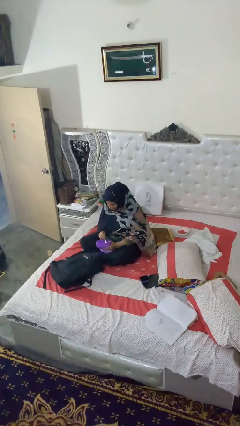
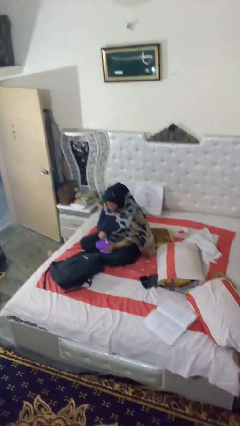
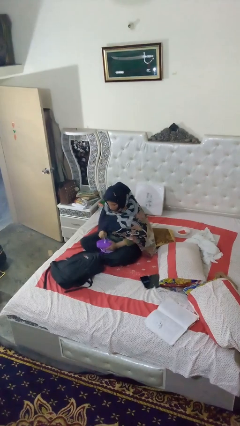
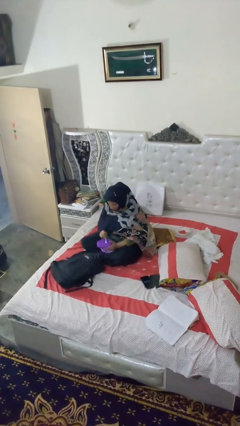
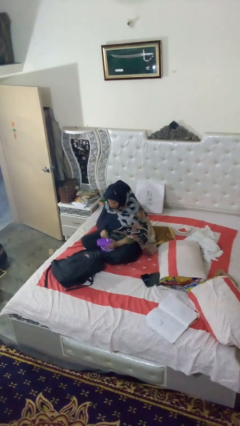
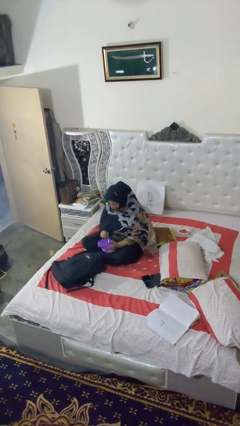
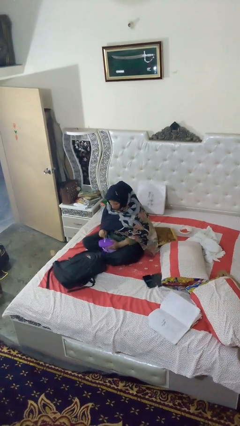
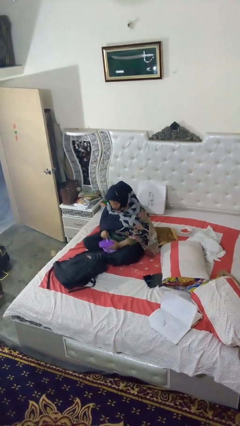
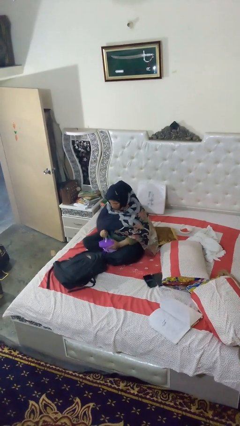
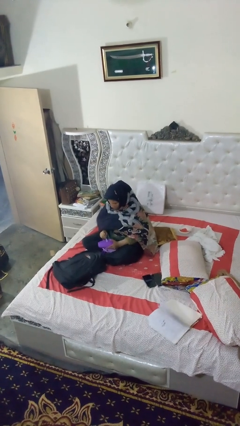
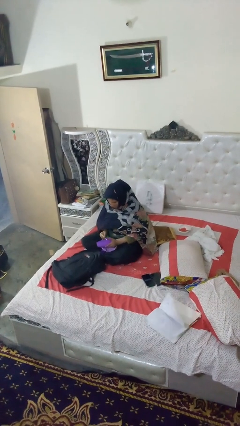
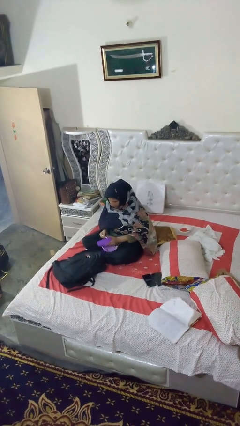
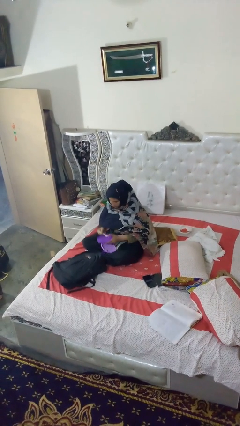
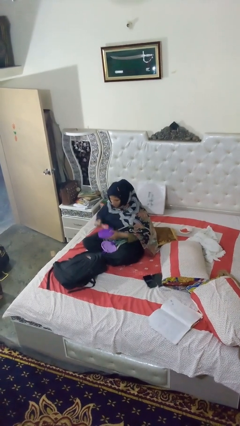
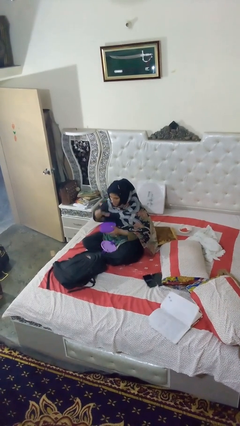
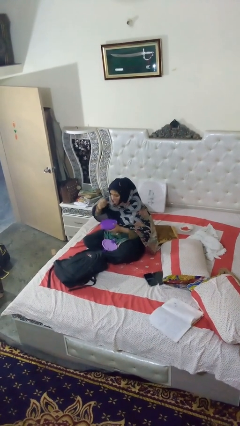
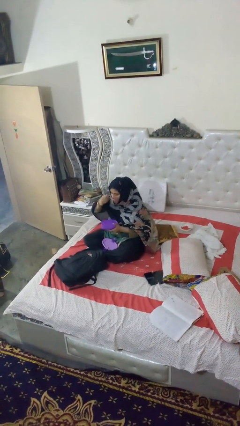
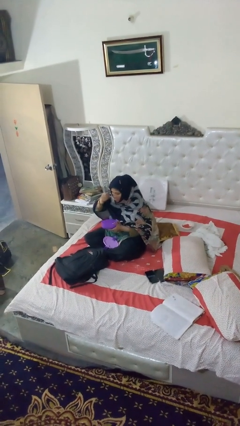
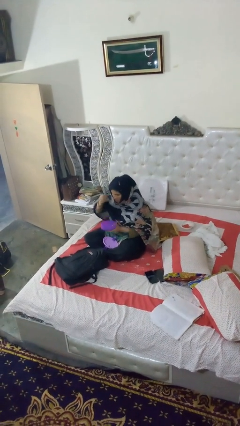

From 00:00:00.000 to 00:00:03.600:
person eats snack from bag

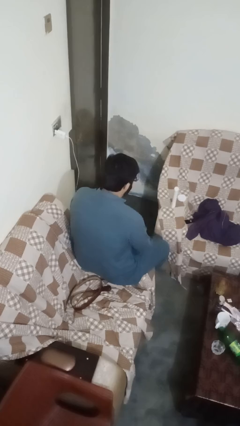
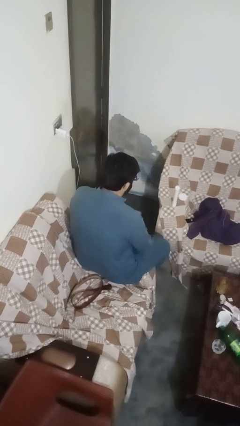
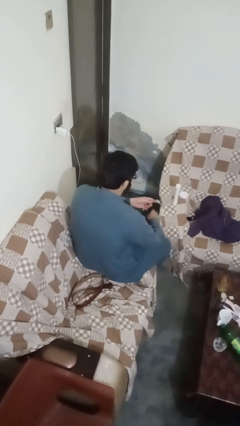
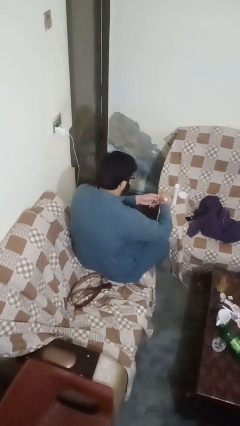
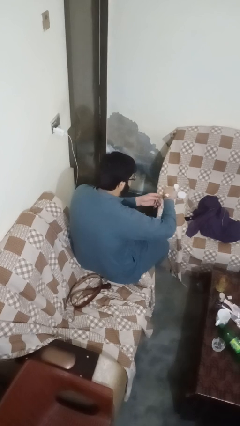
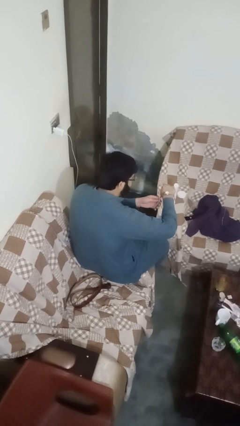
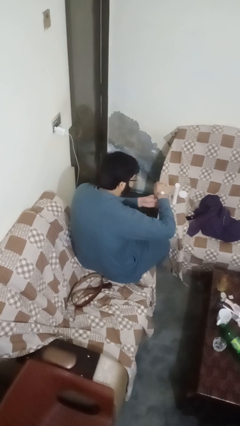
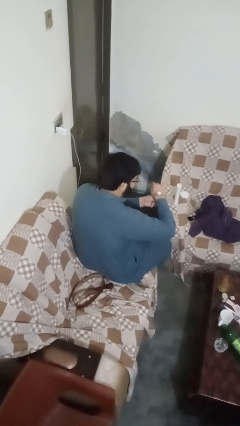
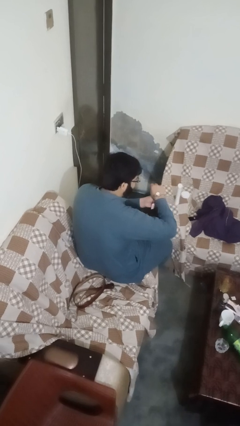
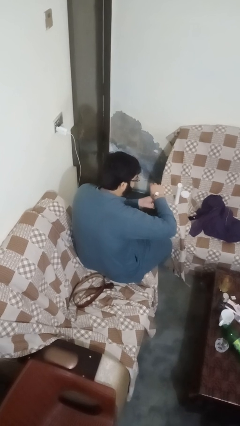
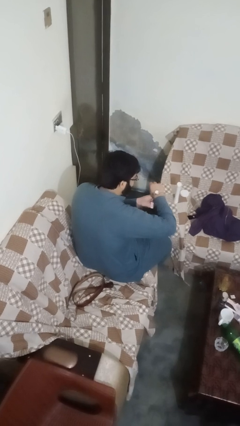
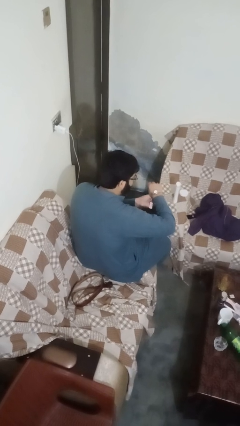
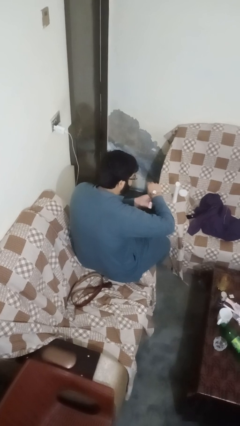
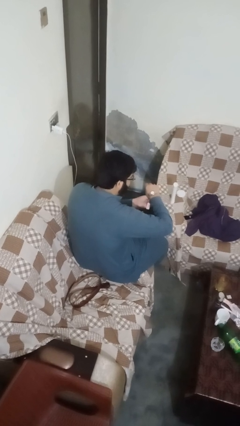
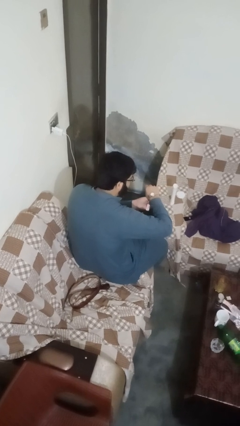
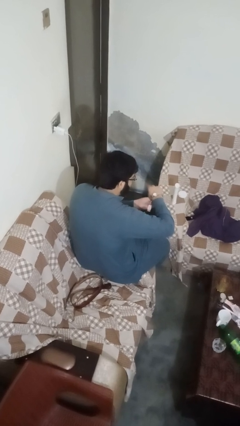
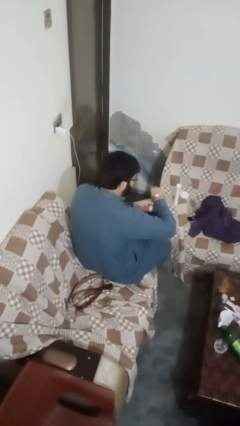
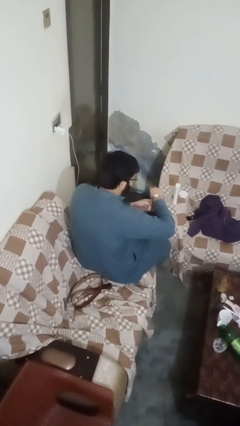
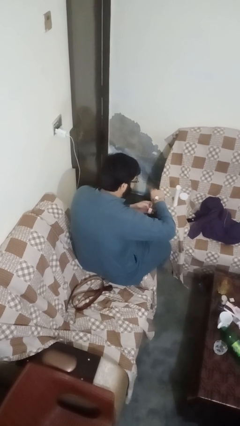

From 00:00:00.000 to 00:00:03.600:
person puts on wristwatch

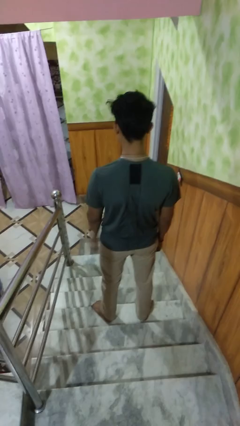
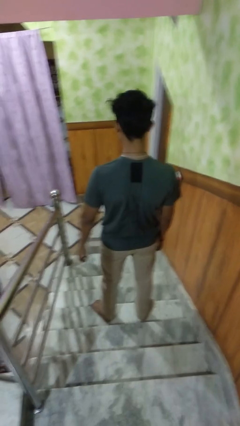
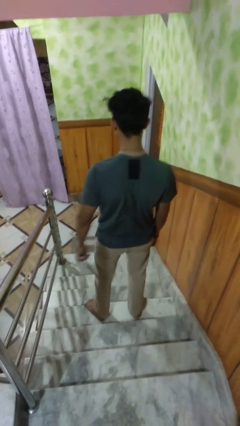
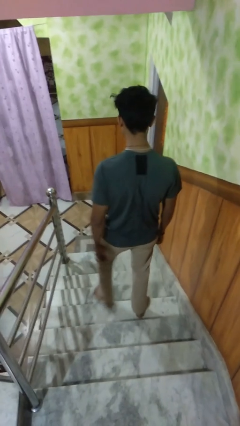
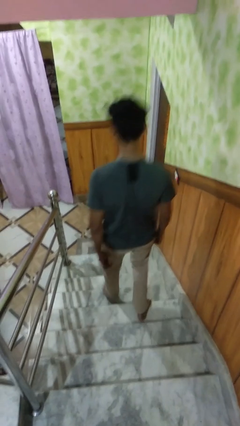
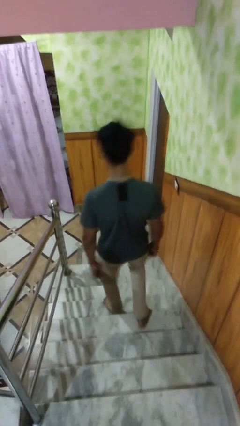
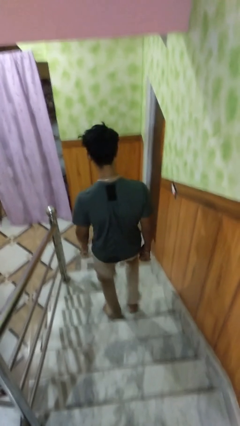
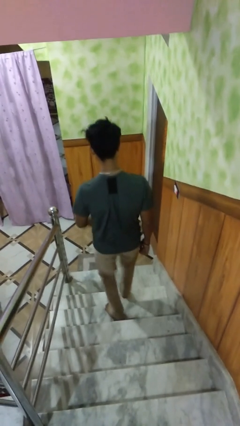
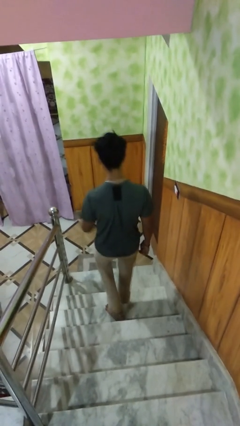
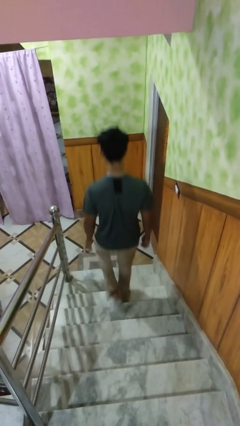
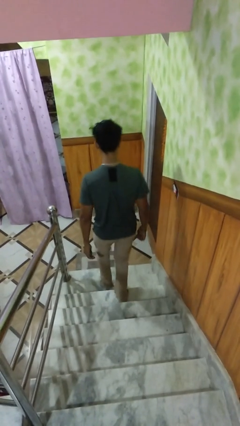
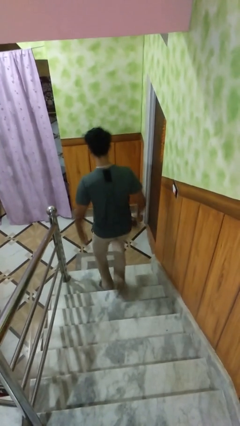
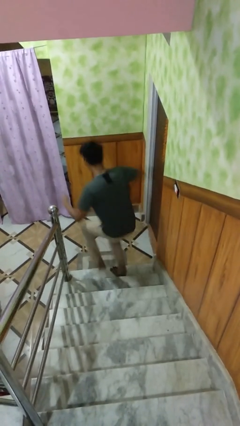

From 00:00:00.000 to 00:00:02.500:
person climbs down stairs

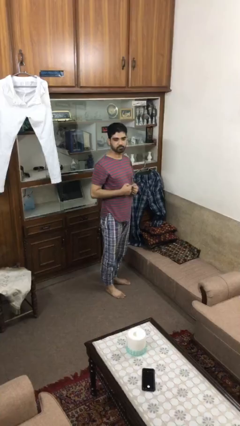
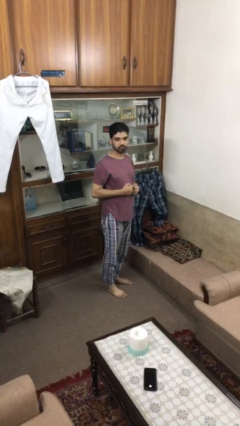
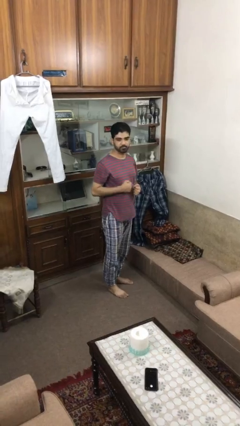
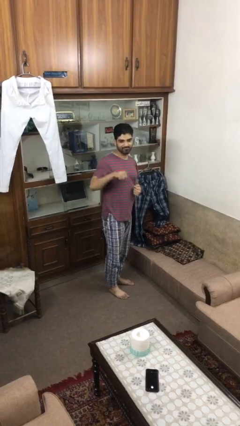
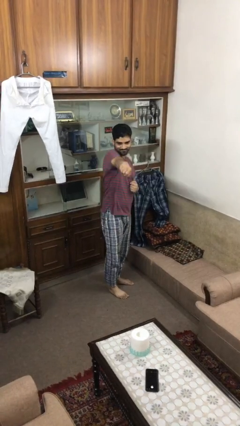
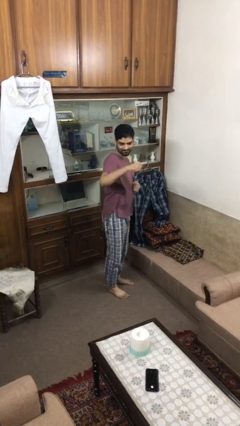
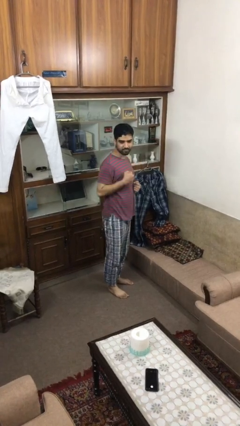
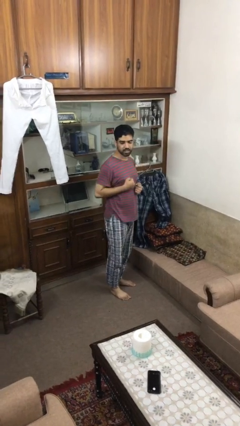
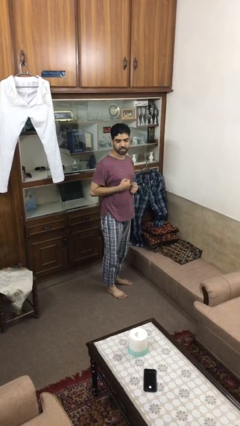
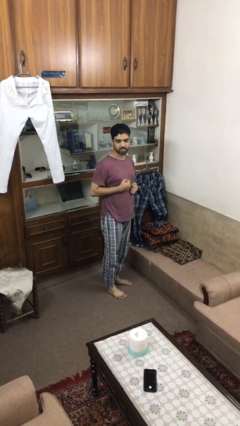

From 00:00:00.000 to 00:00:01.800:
person karate chop

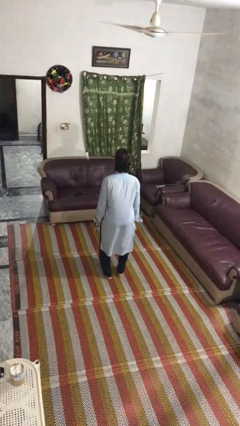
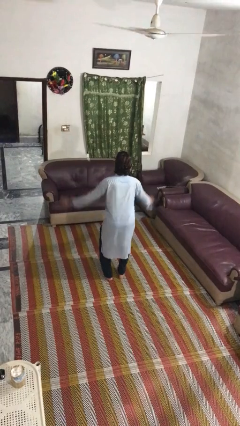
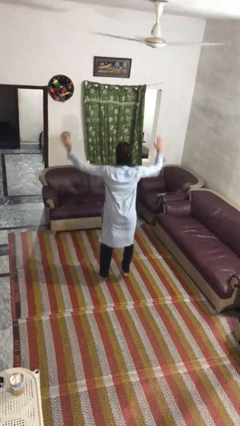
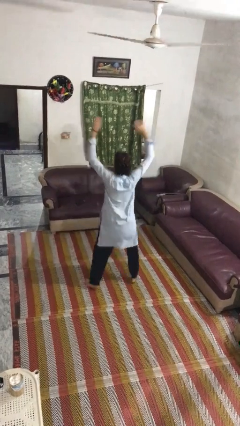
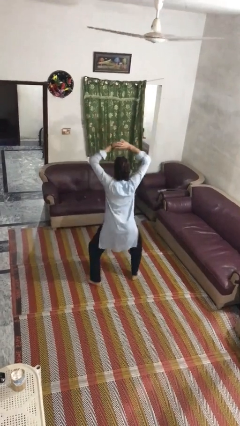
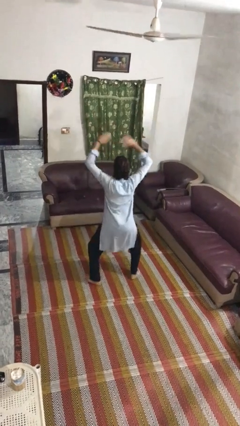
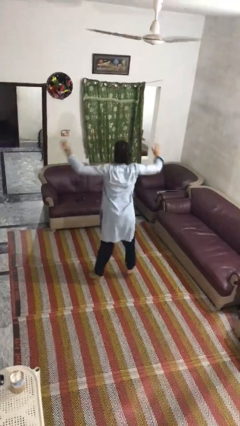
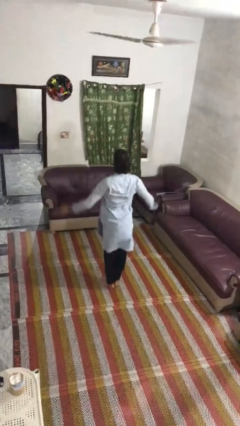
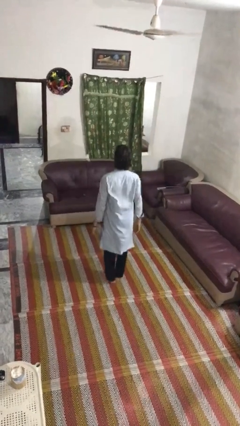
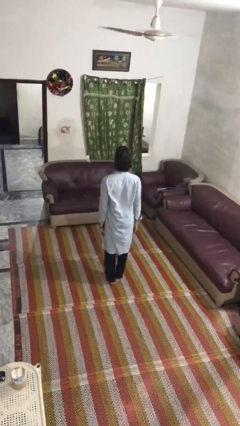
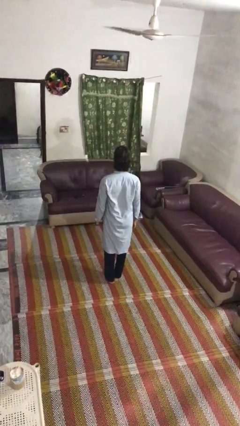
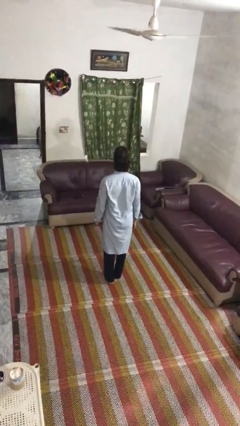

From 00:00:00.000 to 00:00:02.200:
person exercises with jumping jacks

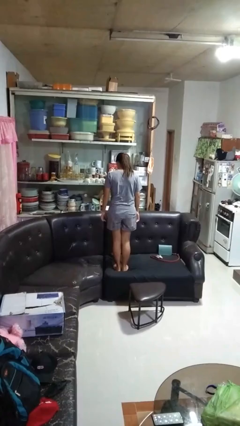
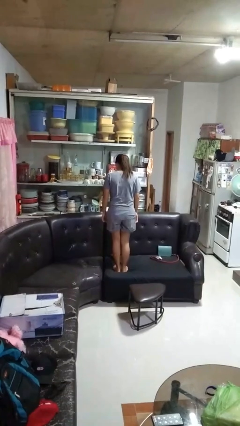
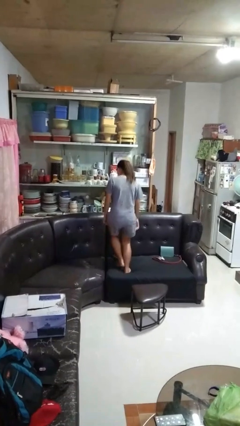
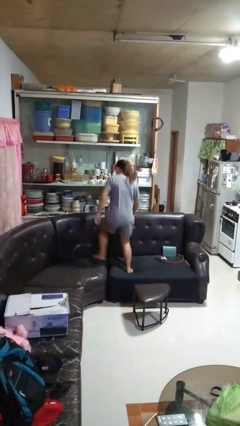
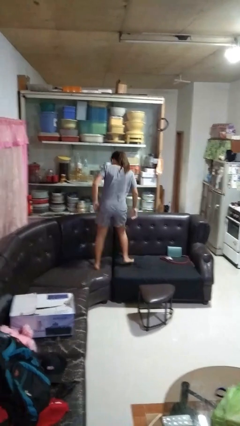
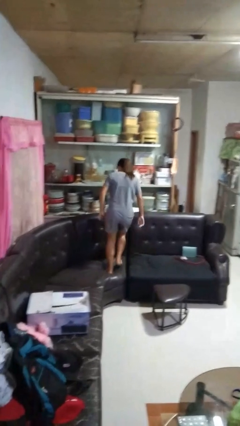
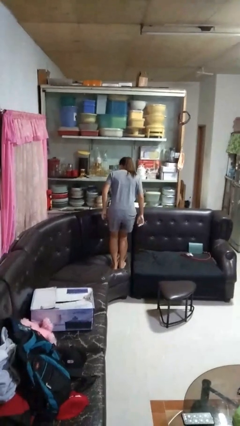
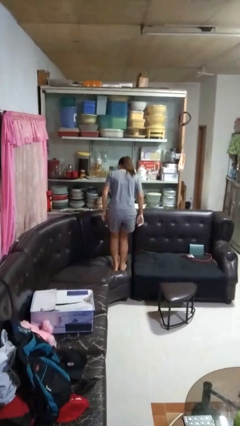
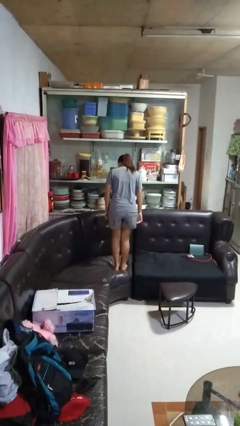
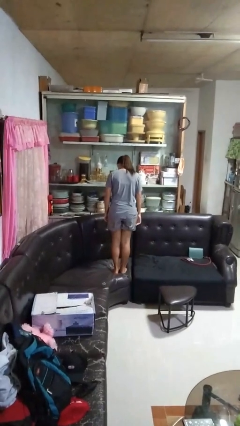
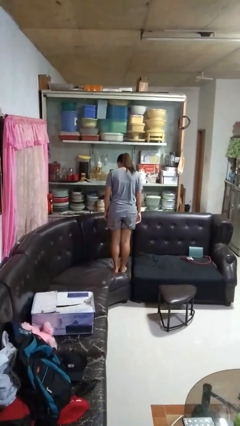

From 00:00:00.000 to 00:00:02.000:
person jumps on couch

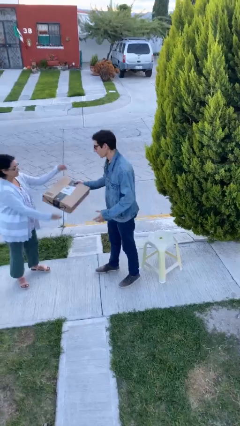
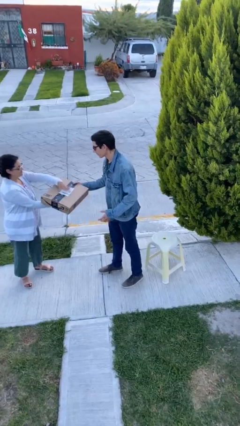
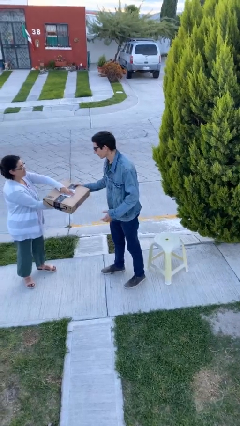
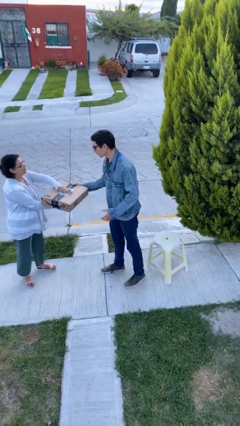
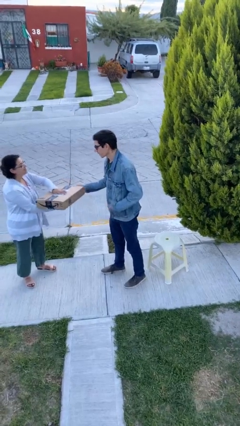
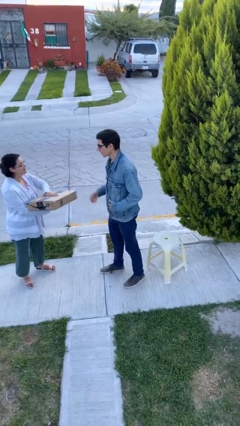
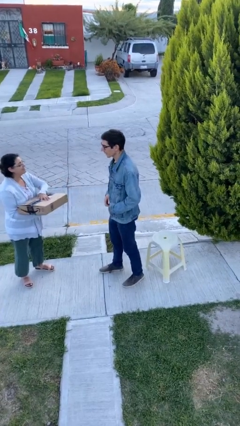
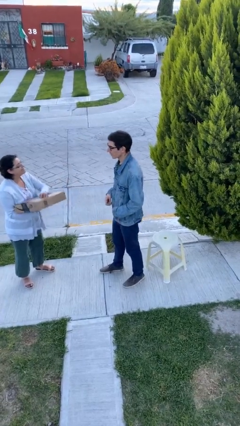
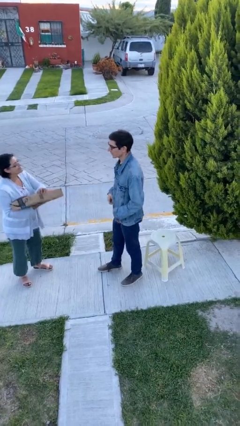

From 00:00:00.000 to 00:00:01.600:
person transfers object to person
